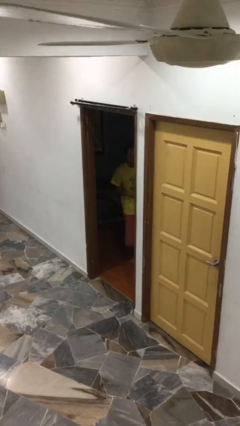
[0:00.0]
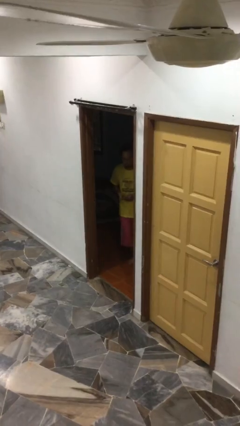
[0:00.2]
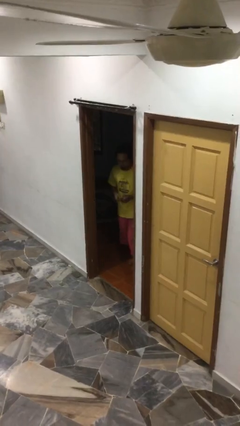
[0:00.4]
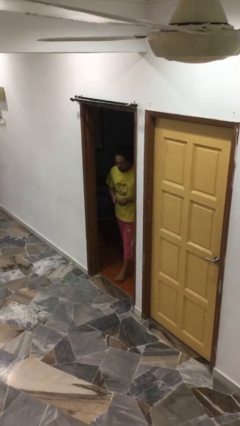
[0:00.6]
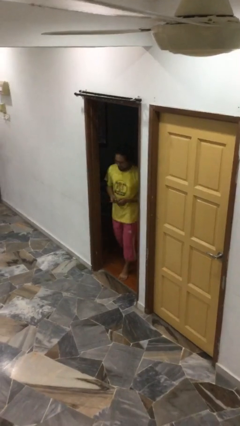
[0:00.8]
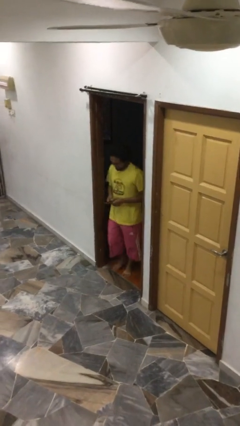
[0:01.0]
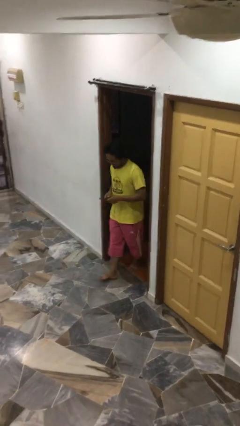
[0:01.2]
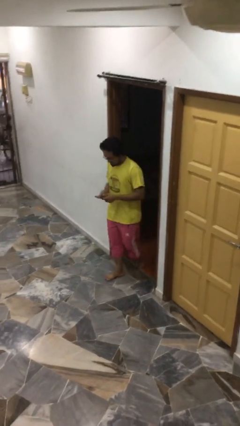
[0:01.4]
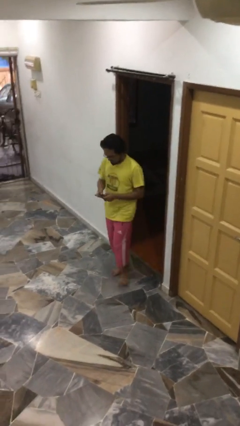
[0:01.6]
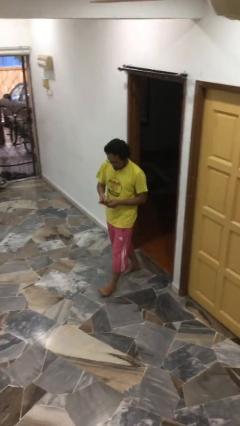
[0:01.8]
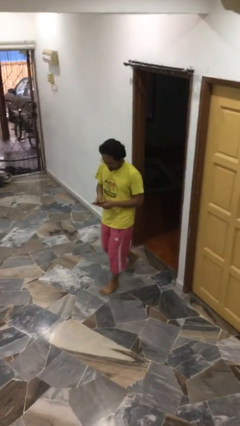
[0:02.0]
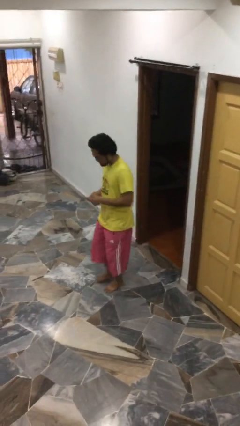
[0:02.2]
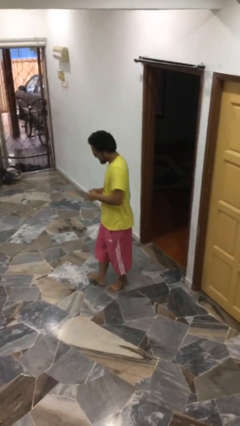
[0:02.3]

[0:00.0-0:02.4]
person enters scene through structure

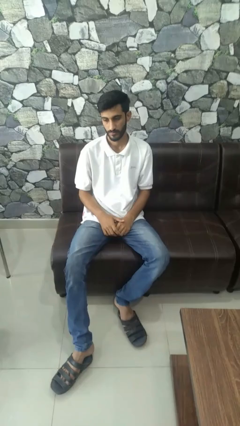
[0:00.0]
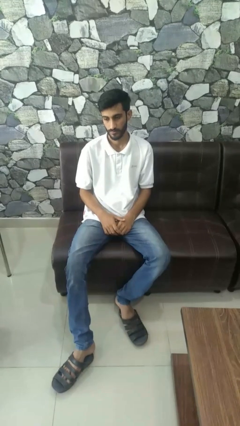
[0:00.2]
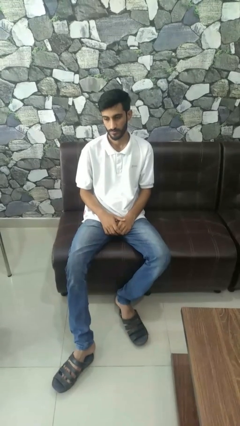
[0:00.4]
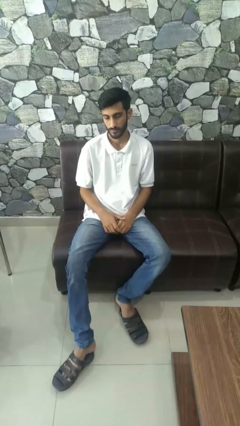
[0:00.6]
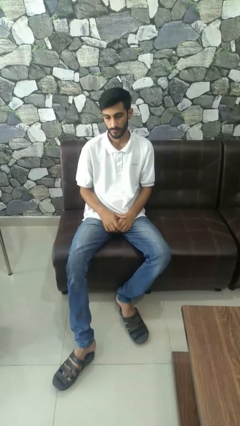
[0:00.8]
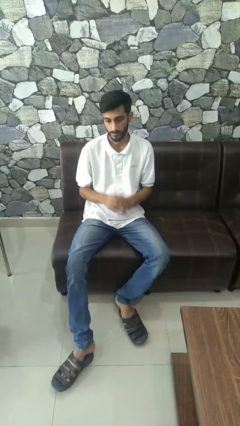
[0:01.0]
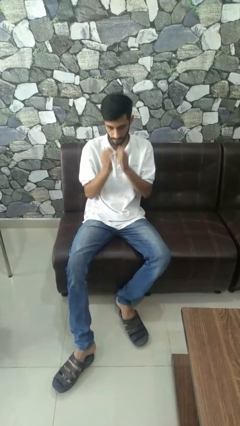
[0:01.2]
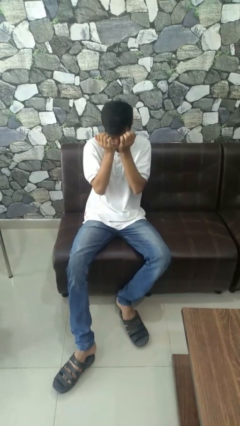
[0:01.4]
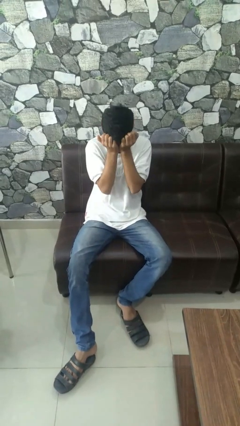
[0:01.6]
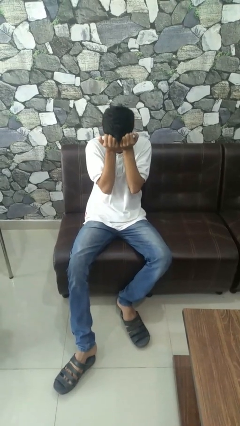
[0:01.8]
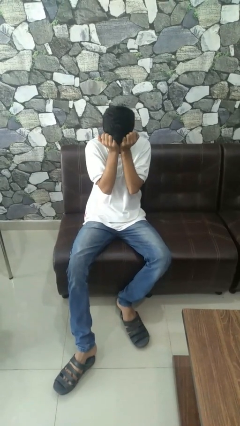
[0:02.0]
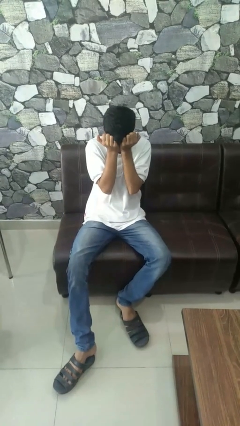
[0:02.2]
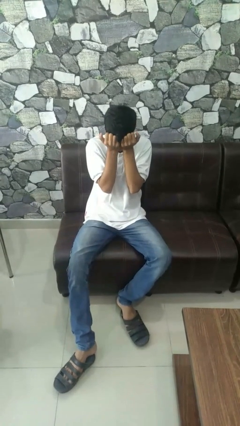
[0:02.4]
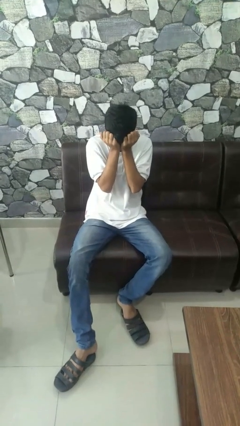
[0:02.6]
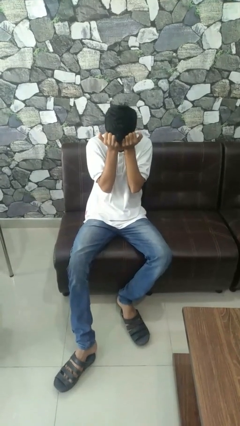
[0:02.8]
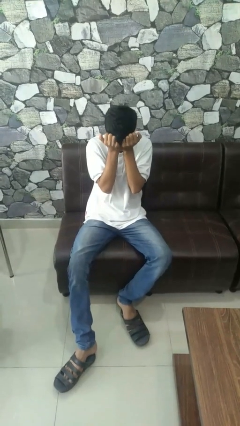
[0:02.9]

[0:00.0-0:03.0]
person rubs eyes

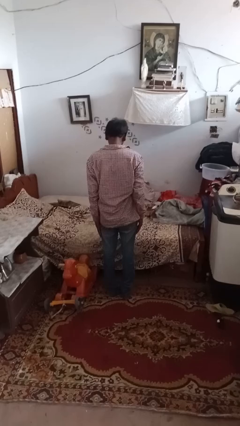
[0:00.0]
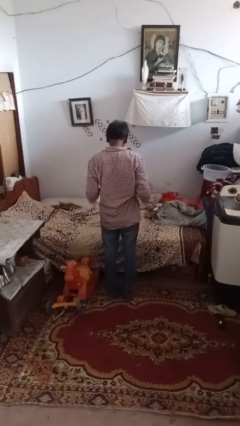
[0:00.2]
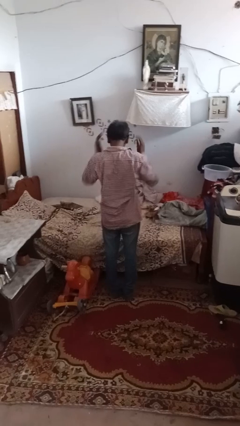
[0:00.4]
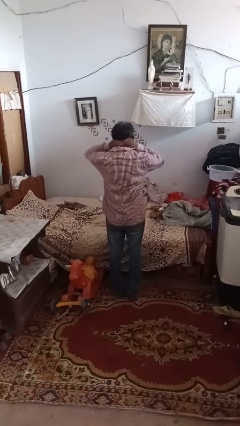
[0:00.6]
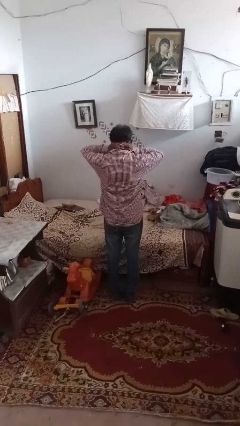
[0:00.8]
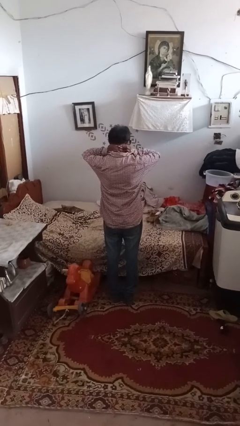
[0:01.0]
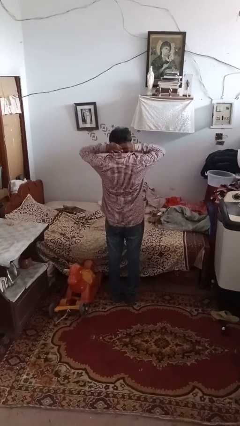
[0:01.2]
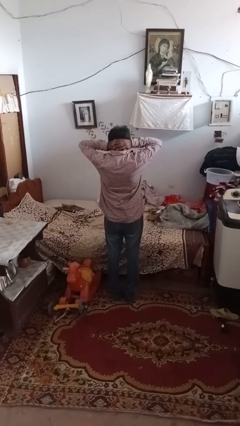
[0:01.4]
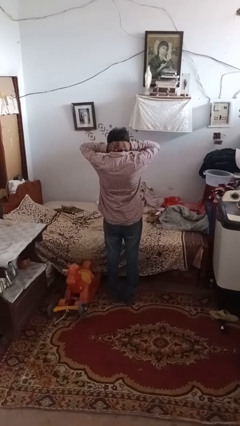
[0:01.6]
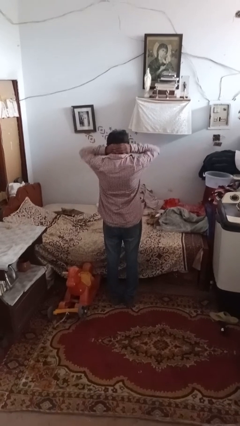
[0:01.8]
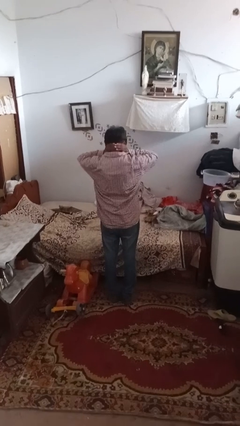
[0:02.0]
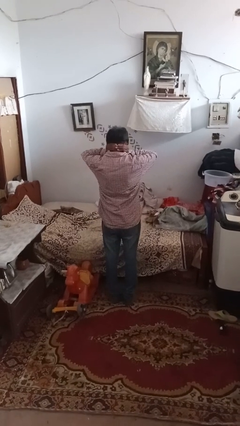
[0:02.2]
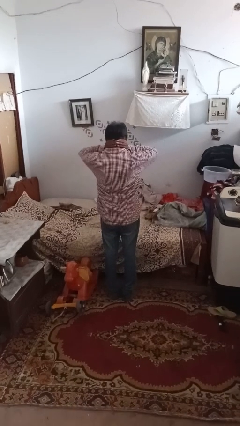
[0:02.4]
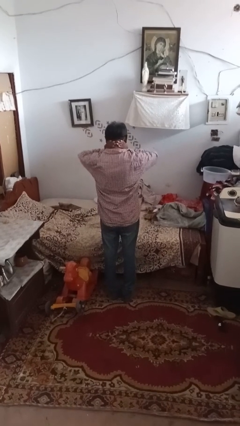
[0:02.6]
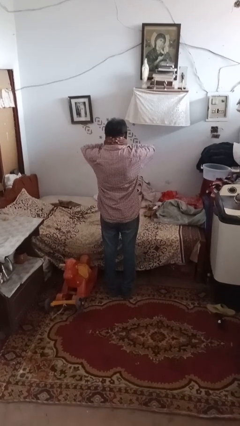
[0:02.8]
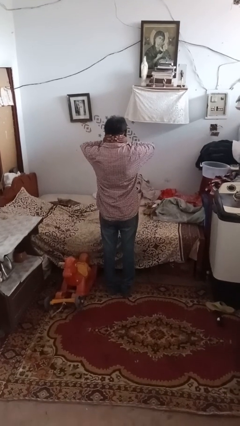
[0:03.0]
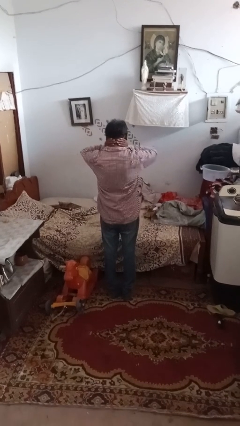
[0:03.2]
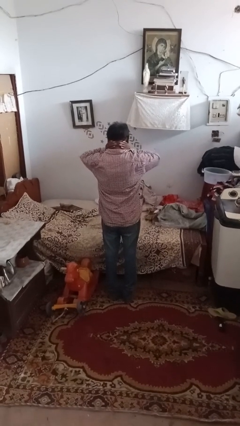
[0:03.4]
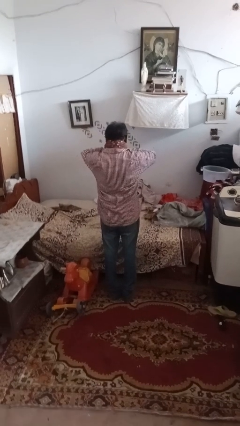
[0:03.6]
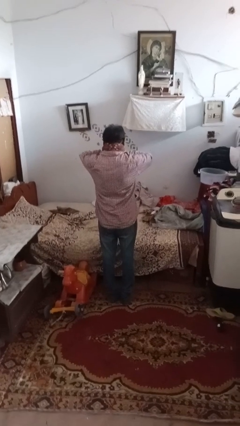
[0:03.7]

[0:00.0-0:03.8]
person rubs neck

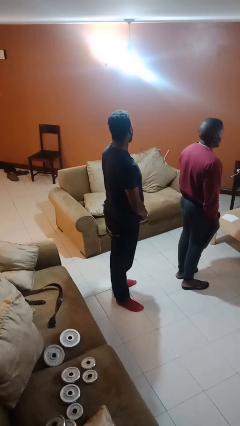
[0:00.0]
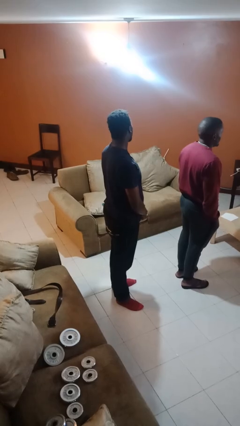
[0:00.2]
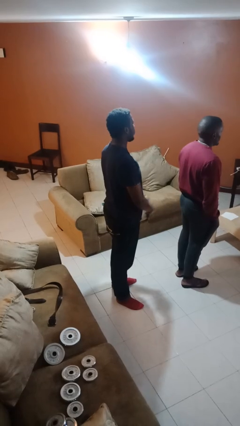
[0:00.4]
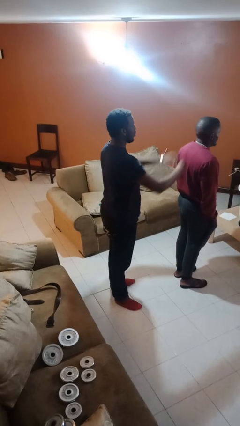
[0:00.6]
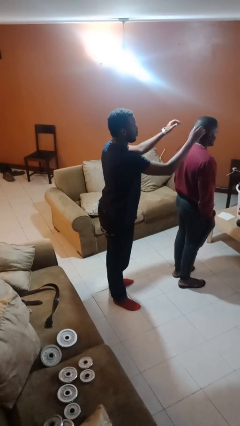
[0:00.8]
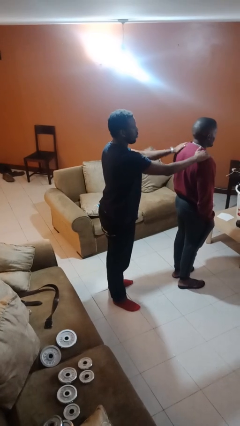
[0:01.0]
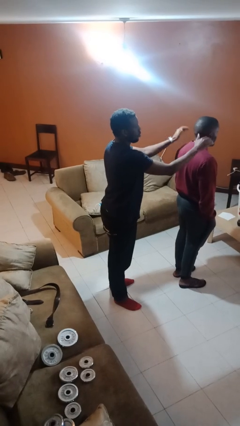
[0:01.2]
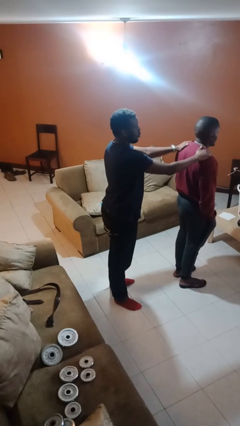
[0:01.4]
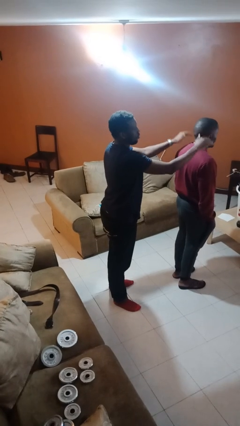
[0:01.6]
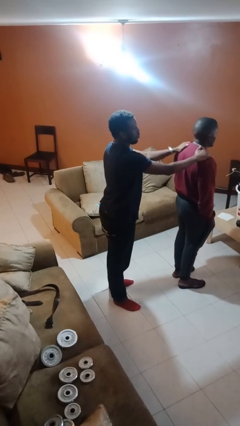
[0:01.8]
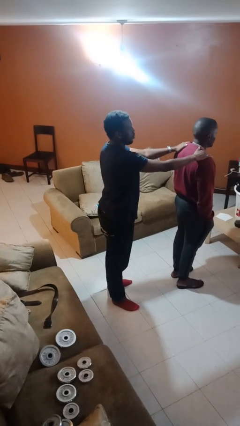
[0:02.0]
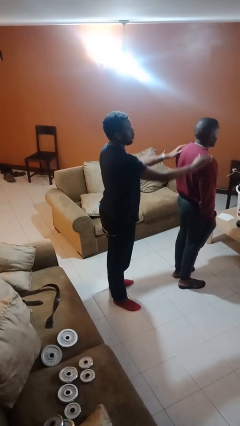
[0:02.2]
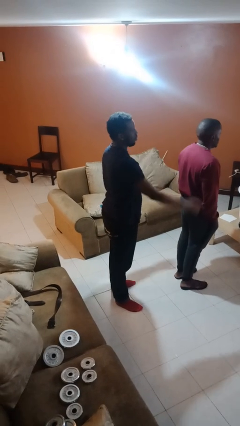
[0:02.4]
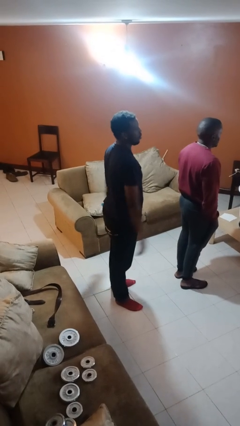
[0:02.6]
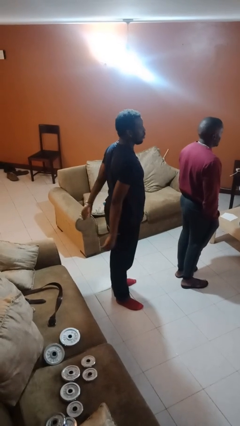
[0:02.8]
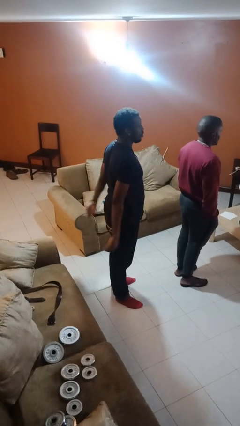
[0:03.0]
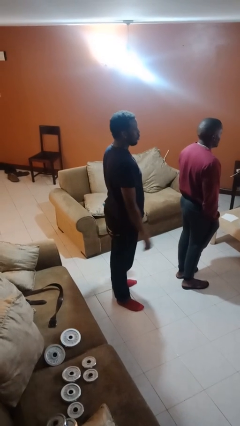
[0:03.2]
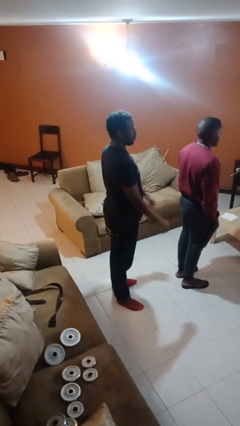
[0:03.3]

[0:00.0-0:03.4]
person pounds shoulders of person

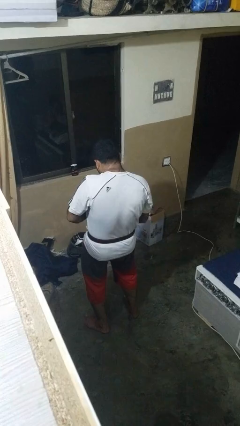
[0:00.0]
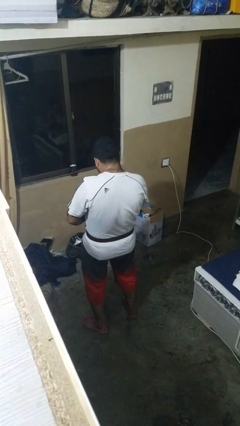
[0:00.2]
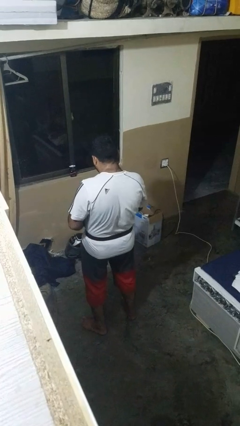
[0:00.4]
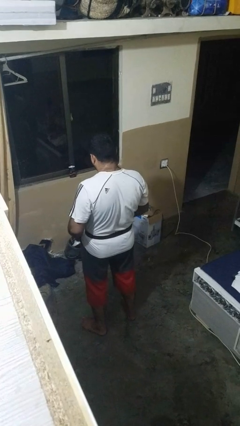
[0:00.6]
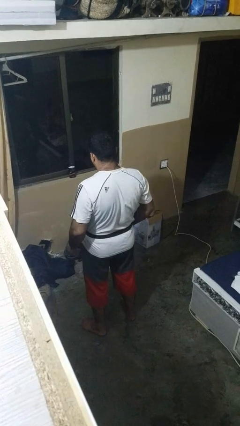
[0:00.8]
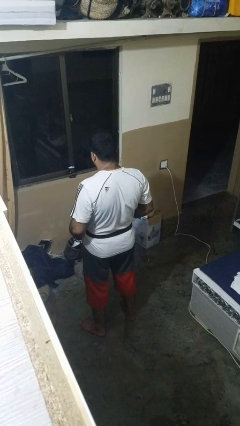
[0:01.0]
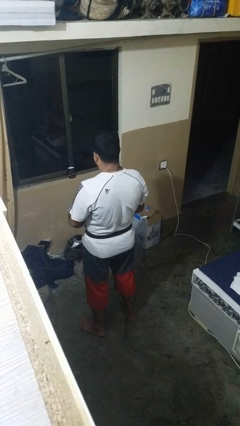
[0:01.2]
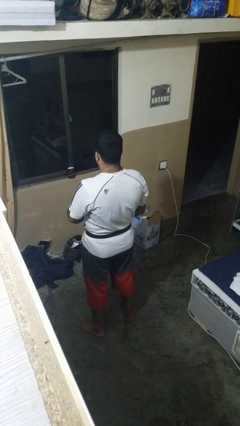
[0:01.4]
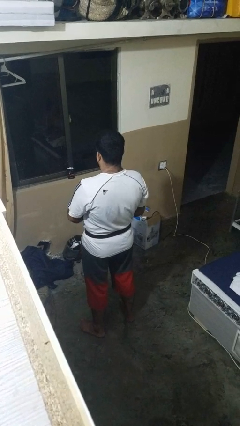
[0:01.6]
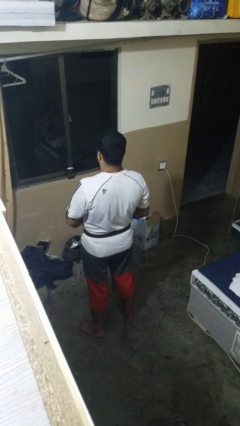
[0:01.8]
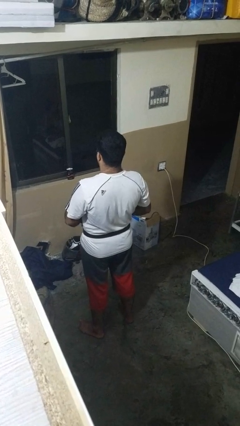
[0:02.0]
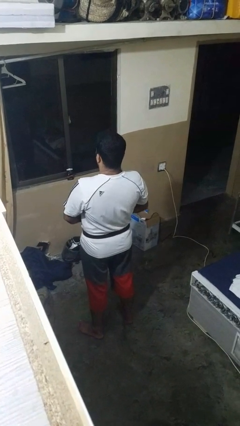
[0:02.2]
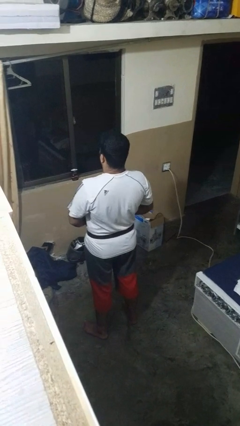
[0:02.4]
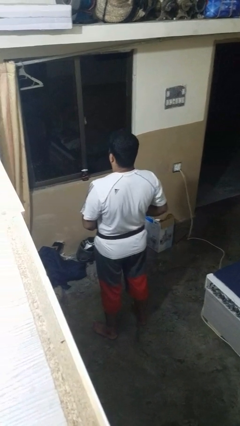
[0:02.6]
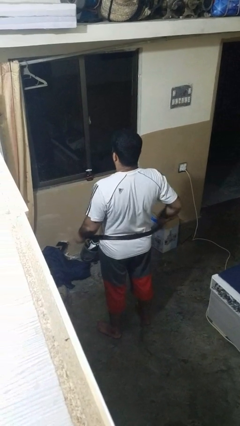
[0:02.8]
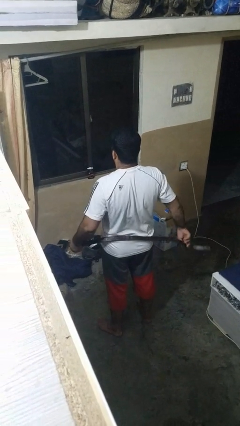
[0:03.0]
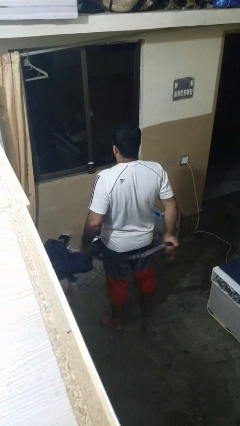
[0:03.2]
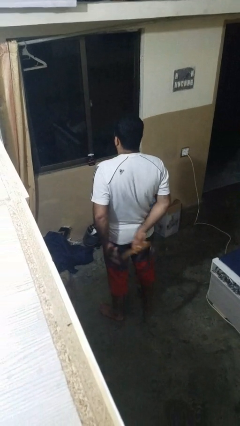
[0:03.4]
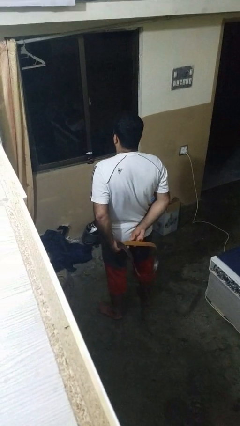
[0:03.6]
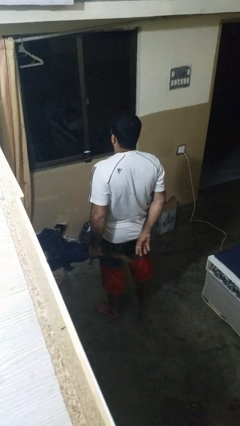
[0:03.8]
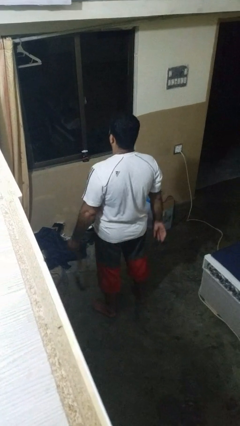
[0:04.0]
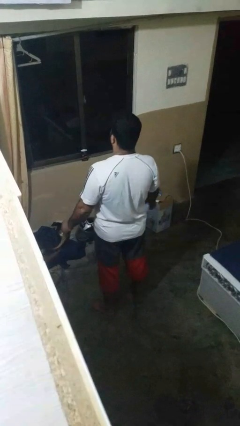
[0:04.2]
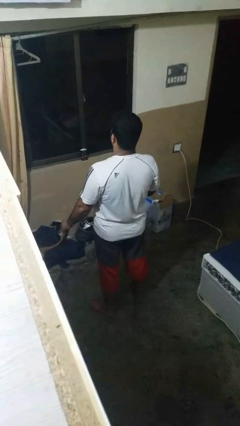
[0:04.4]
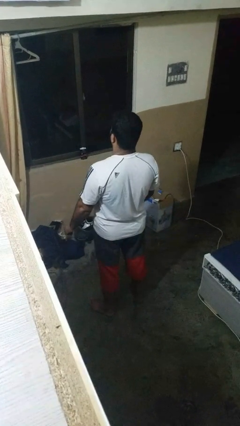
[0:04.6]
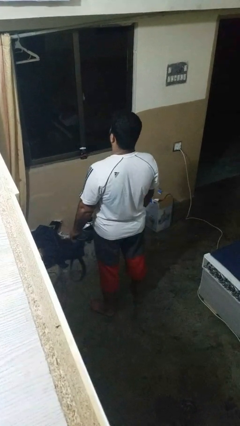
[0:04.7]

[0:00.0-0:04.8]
person takes off belt
